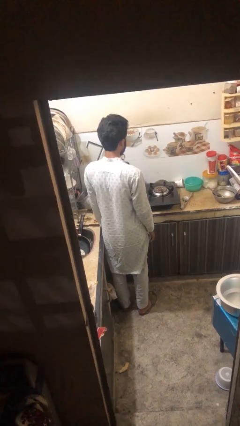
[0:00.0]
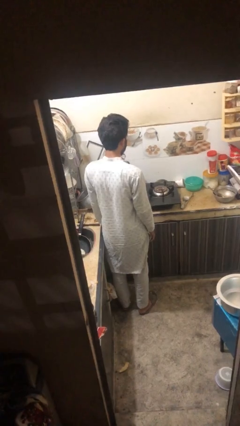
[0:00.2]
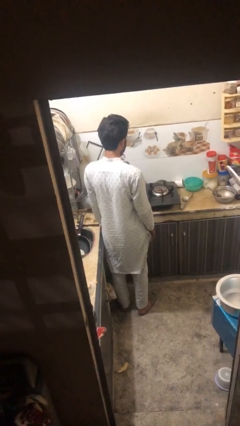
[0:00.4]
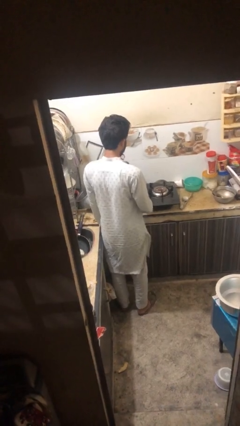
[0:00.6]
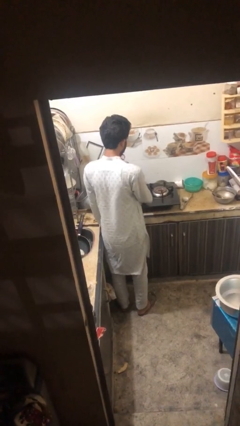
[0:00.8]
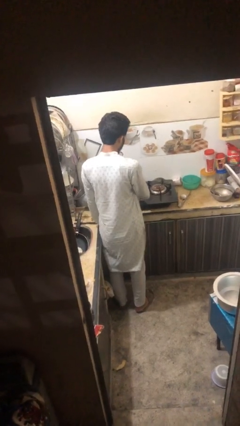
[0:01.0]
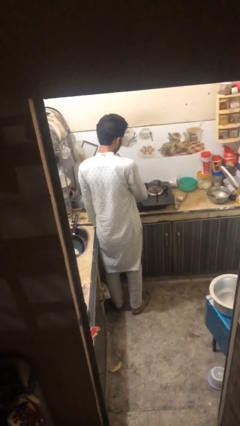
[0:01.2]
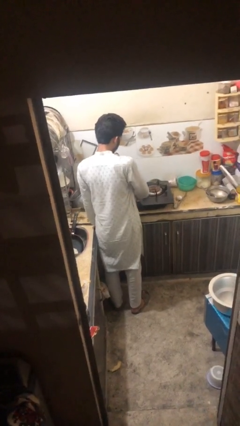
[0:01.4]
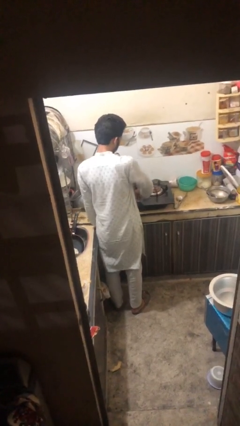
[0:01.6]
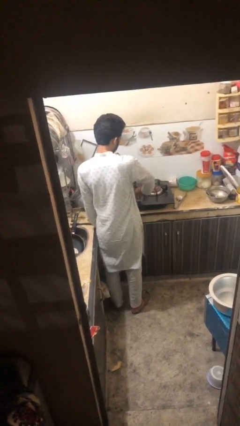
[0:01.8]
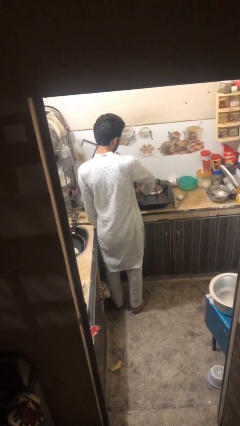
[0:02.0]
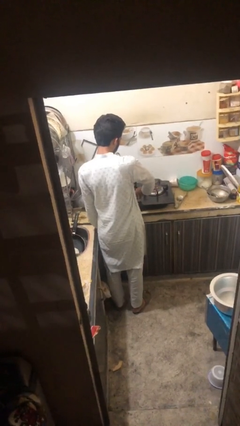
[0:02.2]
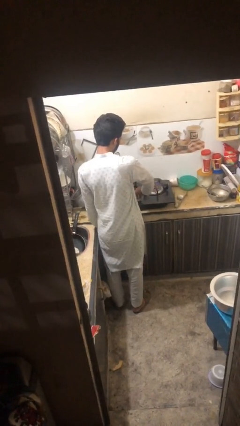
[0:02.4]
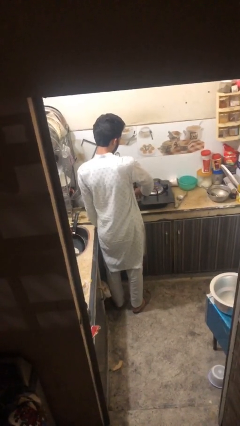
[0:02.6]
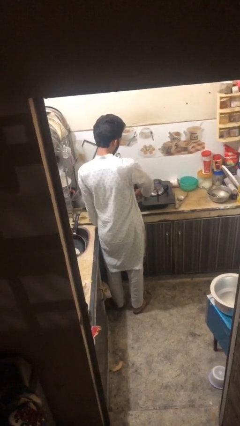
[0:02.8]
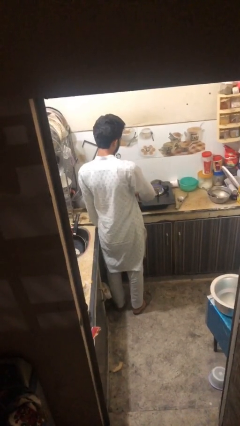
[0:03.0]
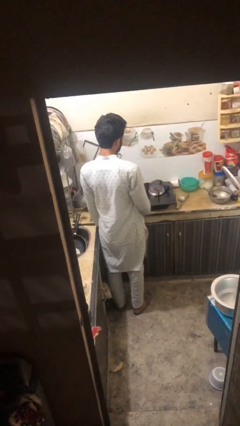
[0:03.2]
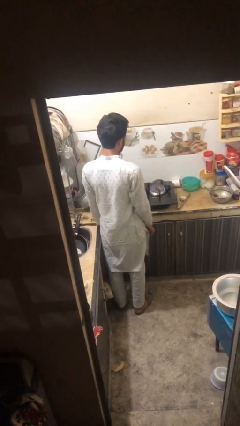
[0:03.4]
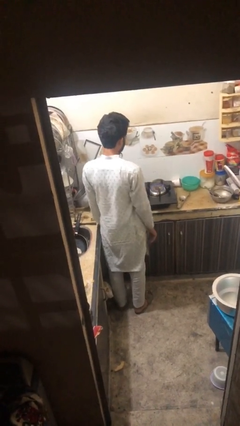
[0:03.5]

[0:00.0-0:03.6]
person turns on stovetop

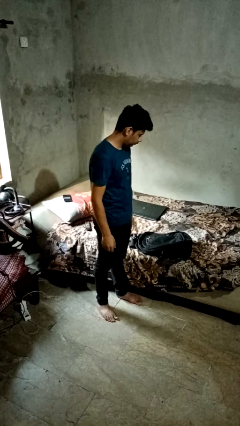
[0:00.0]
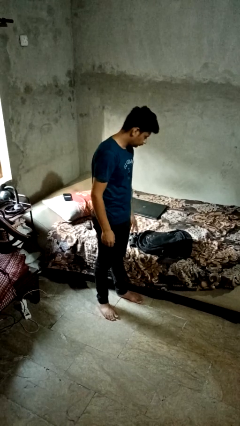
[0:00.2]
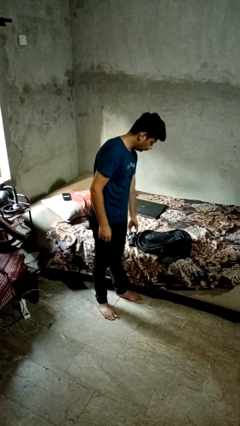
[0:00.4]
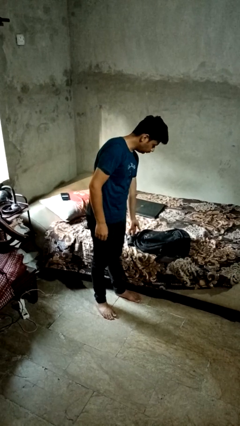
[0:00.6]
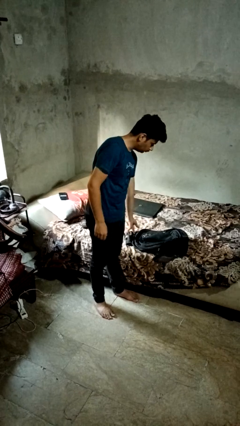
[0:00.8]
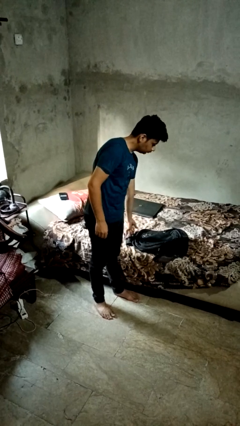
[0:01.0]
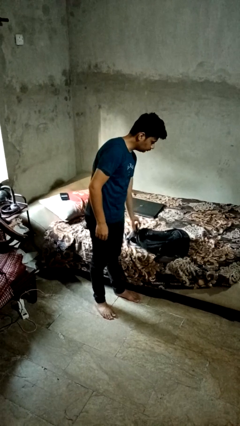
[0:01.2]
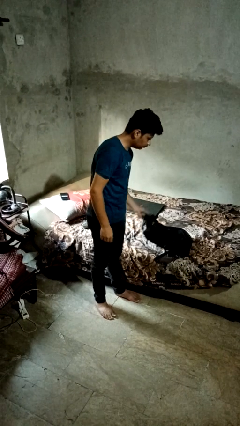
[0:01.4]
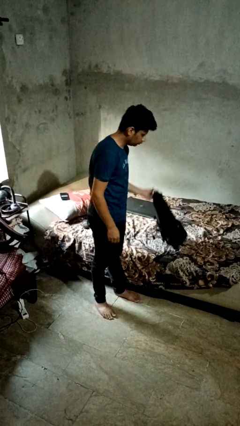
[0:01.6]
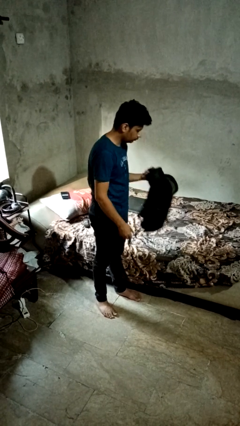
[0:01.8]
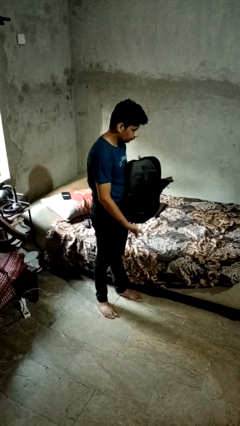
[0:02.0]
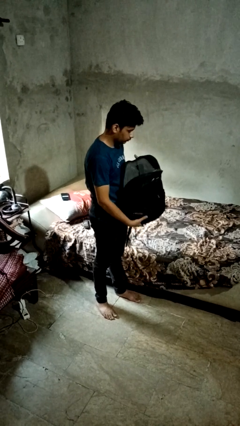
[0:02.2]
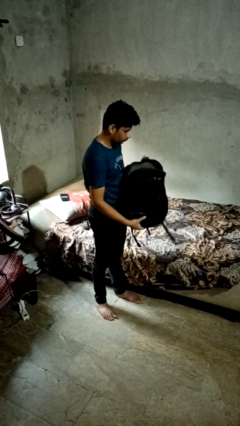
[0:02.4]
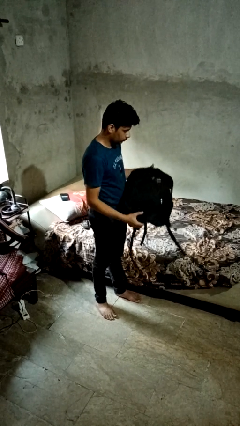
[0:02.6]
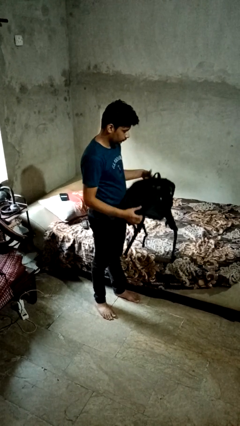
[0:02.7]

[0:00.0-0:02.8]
person picks up object from bed

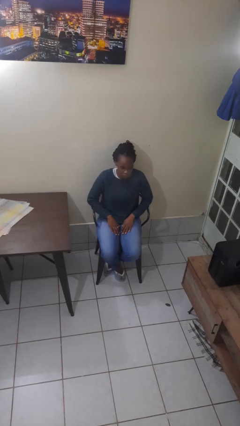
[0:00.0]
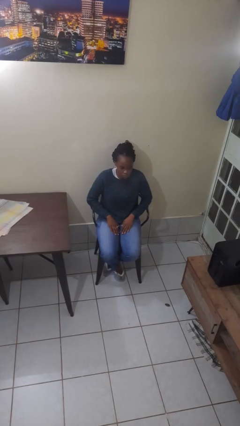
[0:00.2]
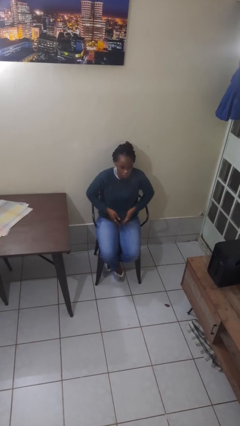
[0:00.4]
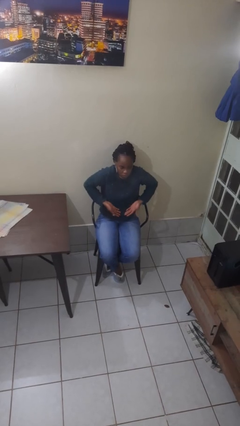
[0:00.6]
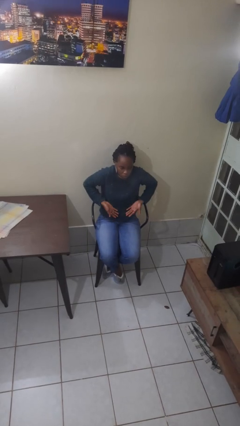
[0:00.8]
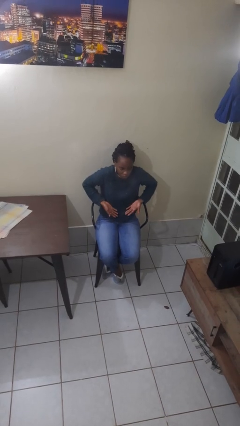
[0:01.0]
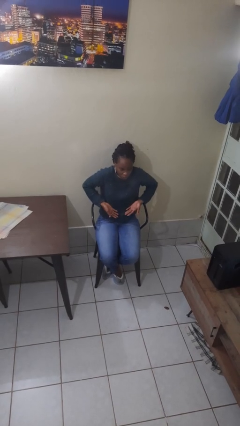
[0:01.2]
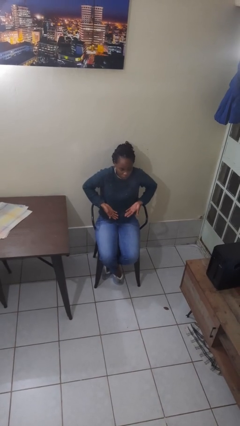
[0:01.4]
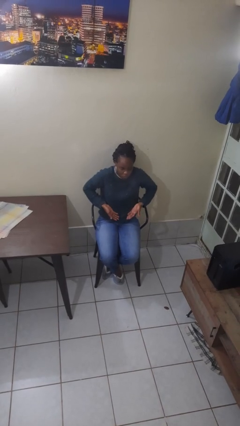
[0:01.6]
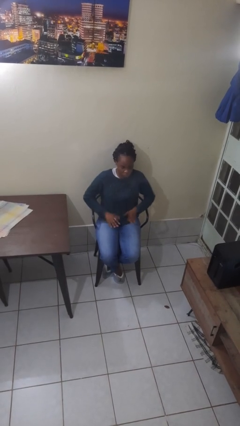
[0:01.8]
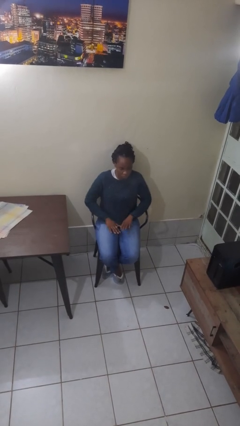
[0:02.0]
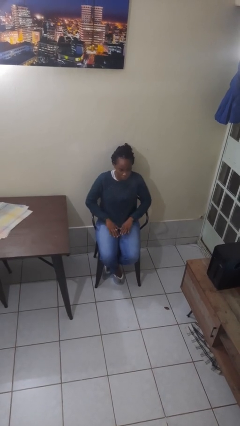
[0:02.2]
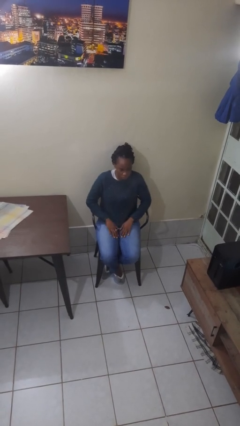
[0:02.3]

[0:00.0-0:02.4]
person shrugs

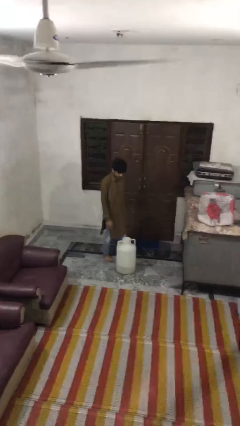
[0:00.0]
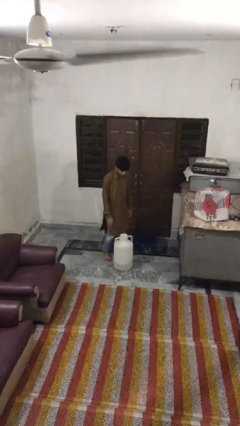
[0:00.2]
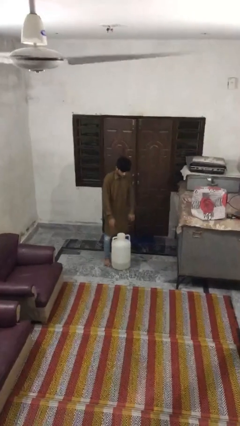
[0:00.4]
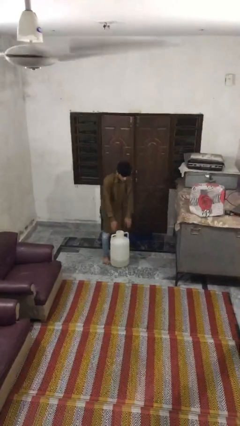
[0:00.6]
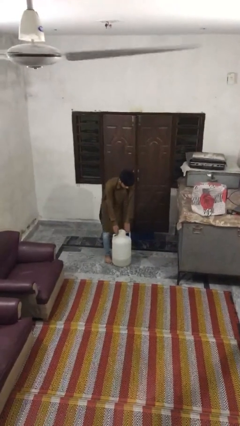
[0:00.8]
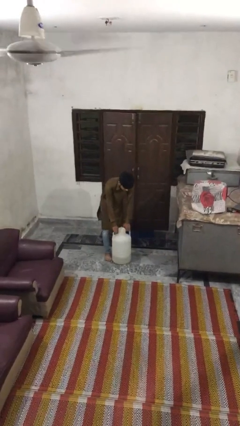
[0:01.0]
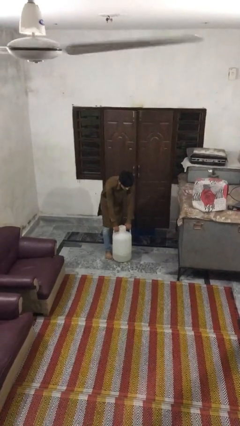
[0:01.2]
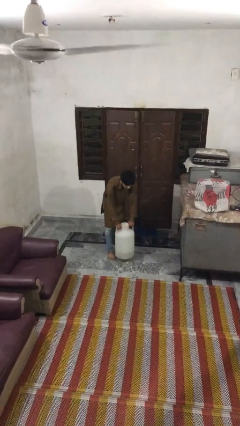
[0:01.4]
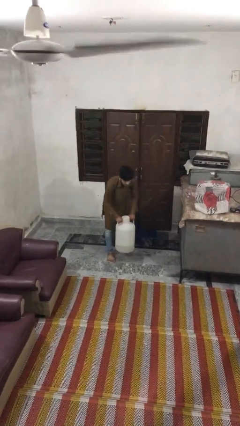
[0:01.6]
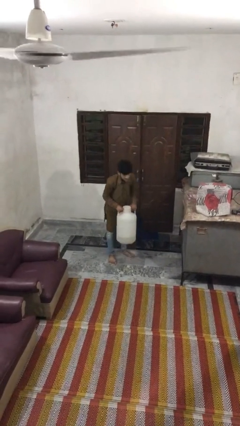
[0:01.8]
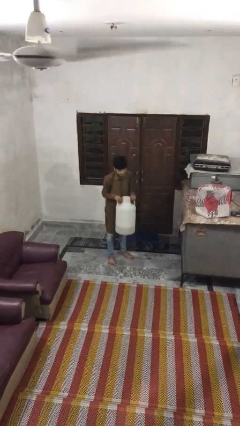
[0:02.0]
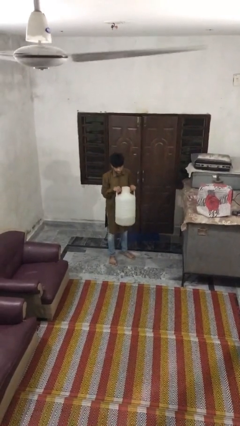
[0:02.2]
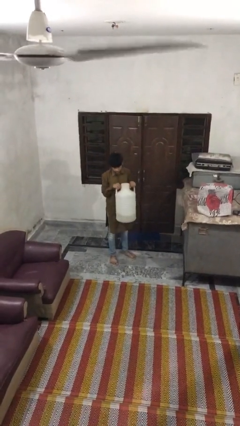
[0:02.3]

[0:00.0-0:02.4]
person picks up object from floor

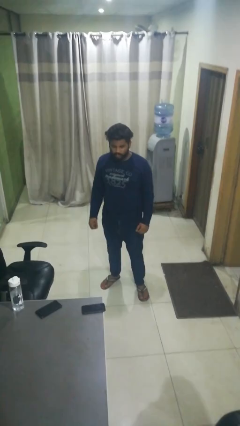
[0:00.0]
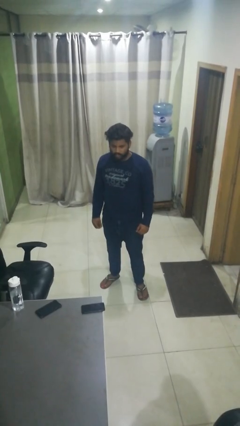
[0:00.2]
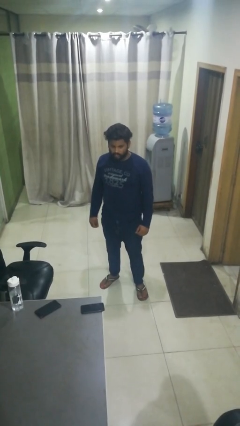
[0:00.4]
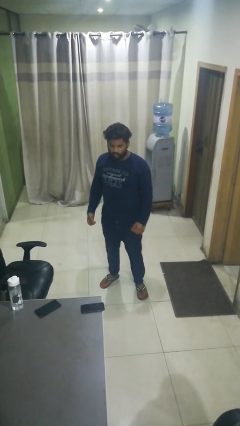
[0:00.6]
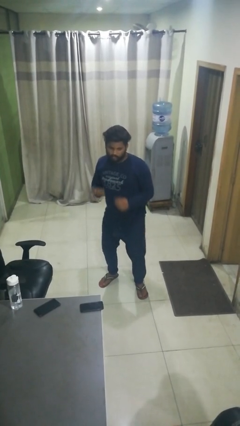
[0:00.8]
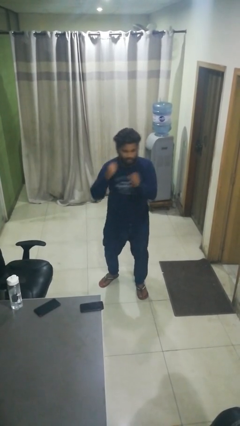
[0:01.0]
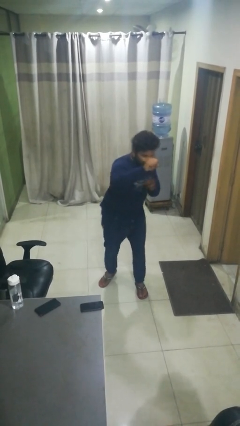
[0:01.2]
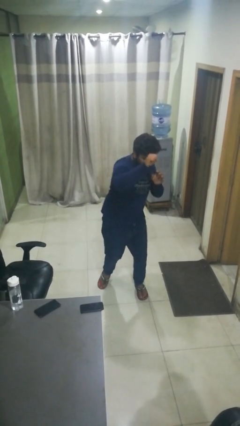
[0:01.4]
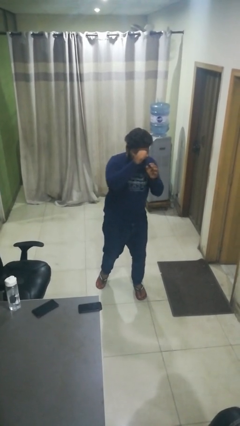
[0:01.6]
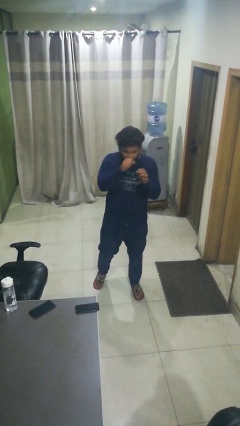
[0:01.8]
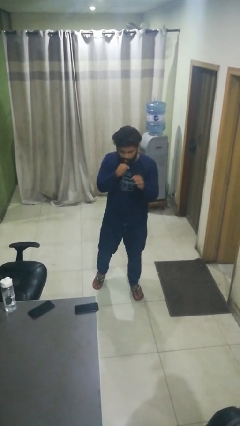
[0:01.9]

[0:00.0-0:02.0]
person punches

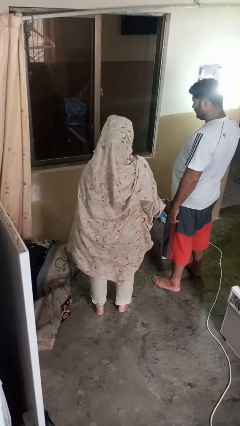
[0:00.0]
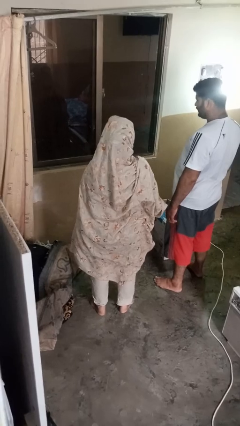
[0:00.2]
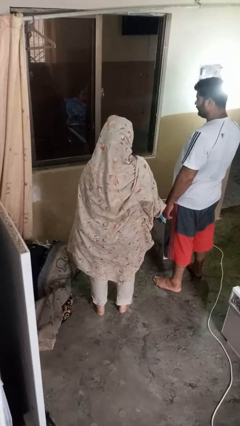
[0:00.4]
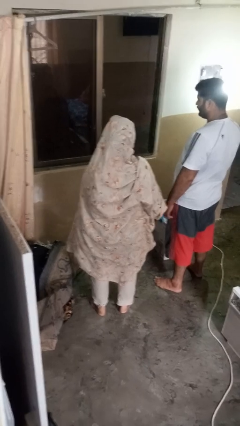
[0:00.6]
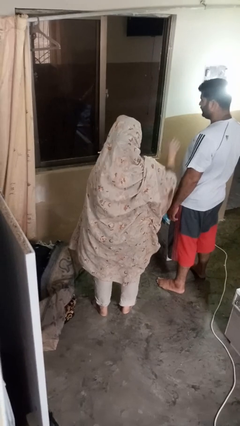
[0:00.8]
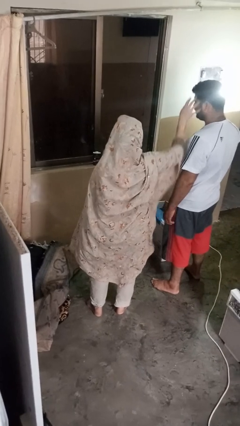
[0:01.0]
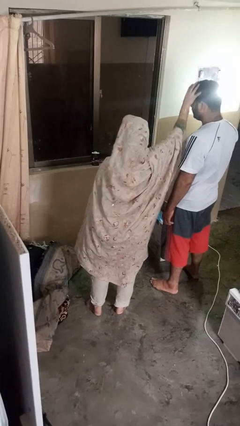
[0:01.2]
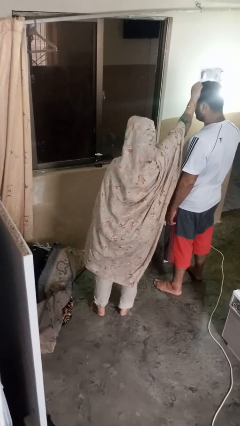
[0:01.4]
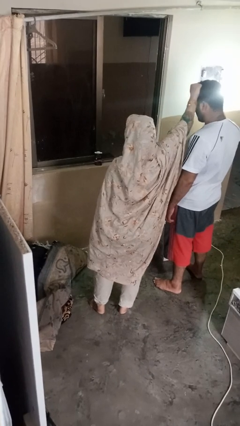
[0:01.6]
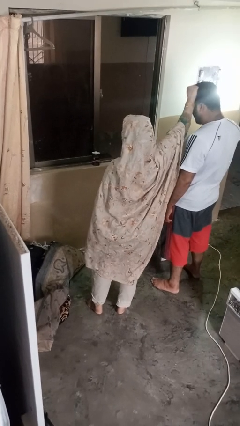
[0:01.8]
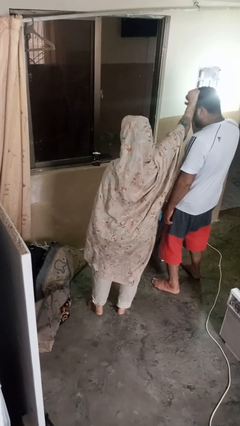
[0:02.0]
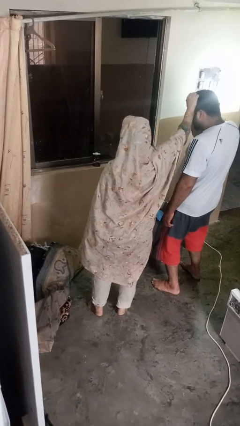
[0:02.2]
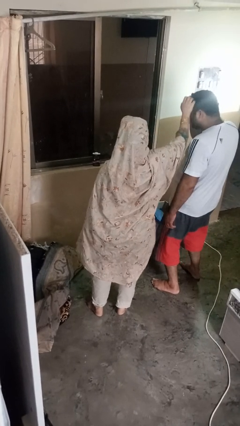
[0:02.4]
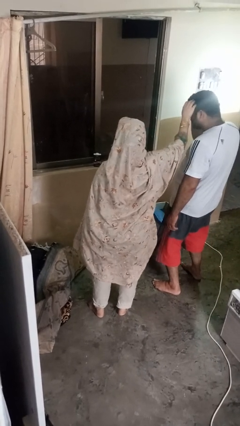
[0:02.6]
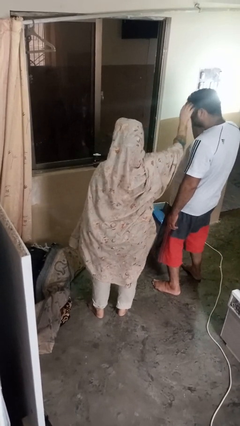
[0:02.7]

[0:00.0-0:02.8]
person grabs person by hair

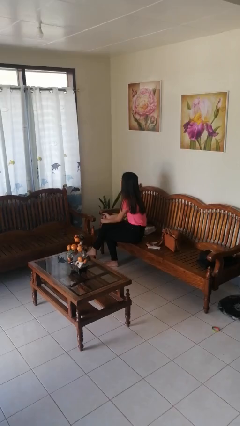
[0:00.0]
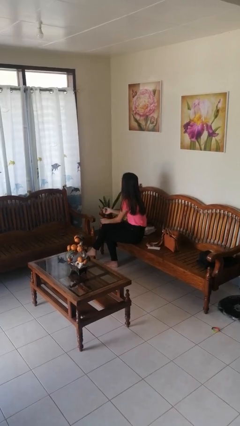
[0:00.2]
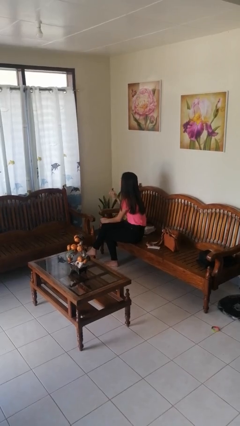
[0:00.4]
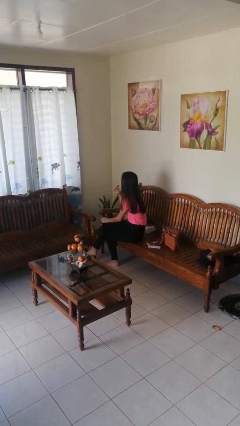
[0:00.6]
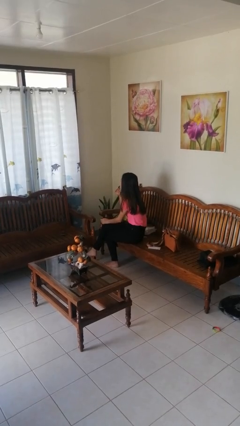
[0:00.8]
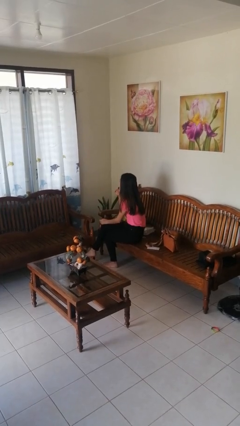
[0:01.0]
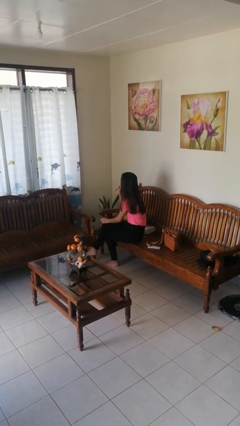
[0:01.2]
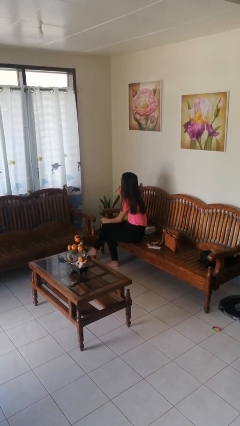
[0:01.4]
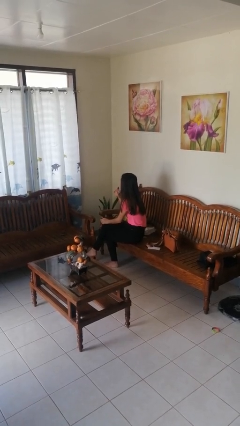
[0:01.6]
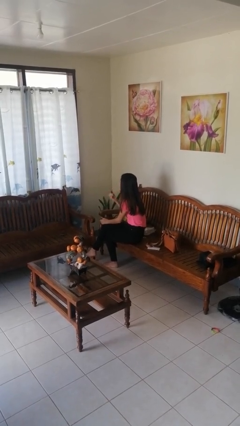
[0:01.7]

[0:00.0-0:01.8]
person applies lip makeup
